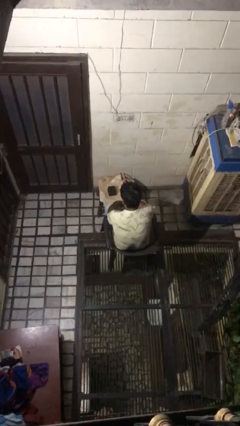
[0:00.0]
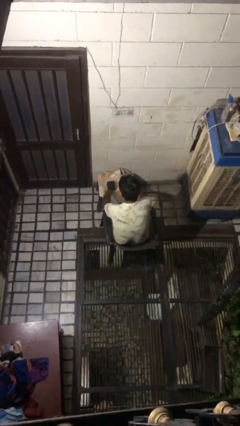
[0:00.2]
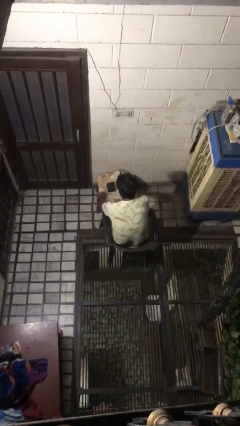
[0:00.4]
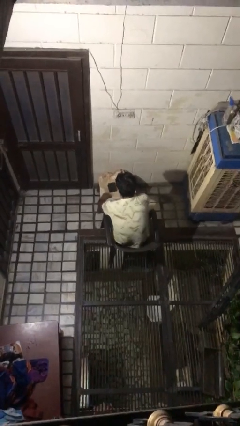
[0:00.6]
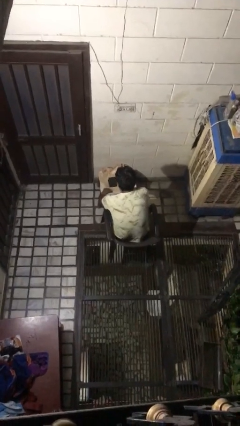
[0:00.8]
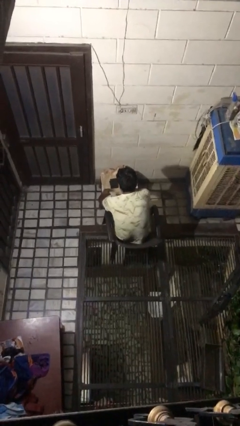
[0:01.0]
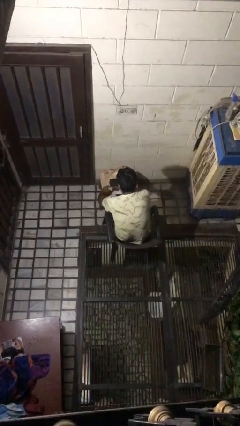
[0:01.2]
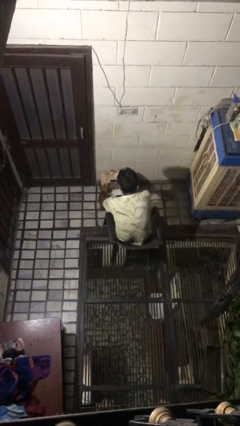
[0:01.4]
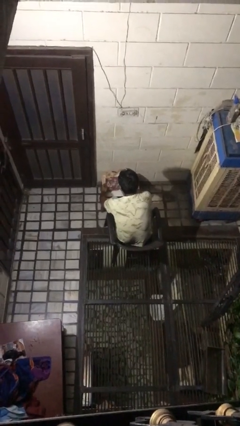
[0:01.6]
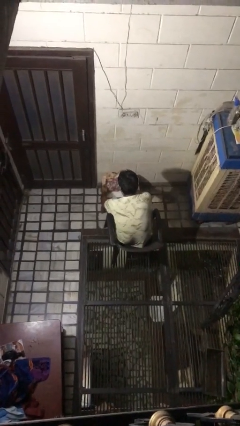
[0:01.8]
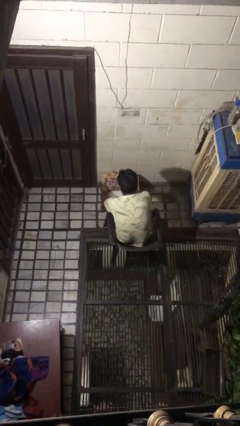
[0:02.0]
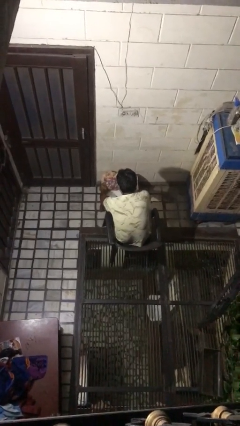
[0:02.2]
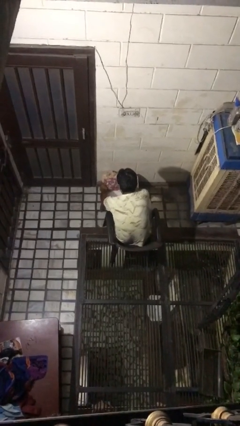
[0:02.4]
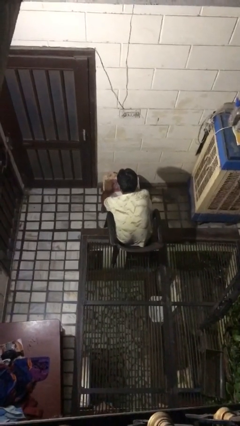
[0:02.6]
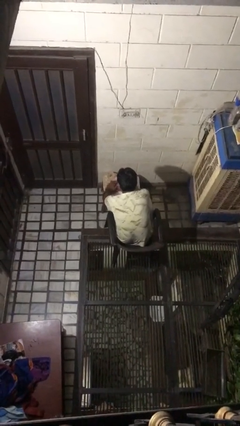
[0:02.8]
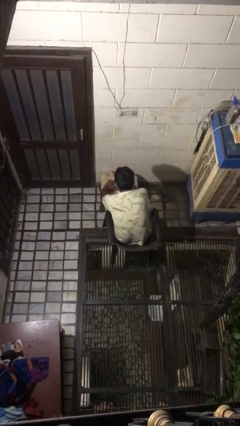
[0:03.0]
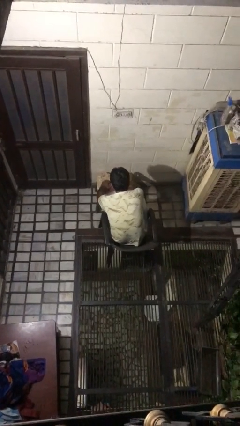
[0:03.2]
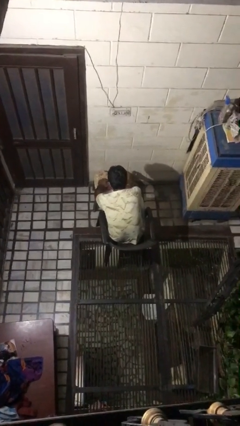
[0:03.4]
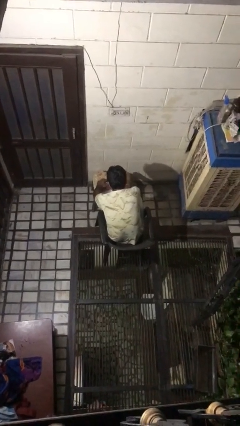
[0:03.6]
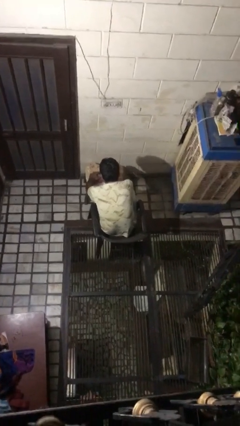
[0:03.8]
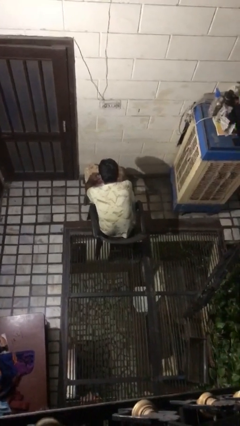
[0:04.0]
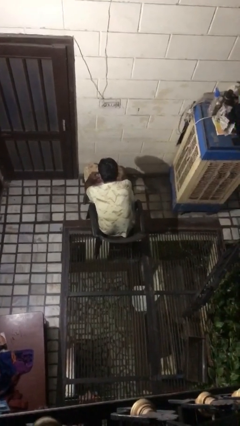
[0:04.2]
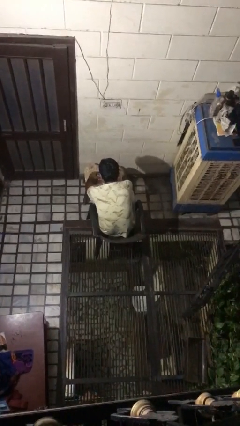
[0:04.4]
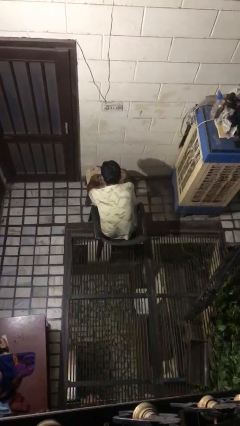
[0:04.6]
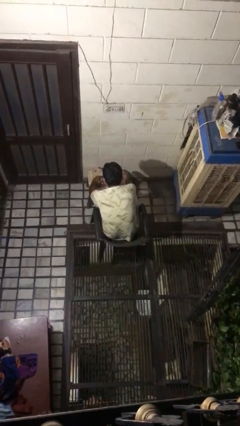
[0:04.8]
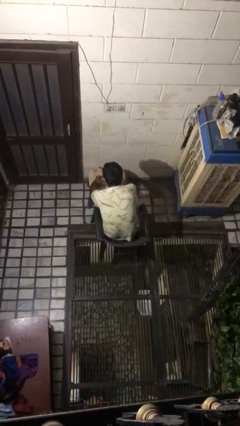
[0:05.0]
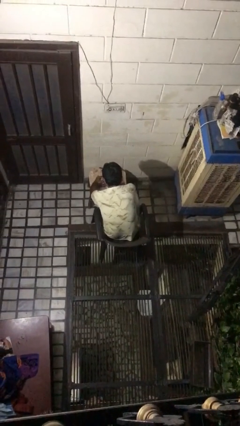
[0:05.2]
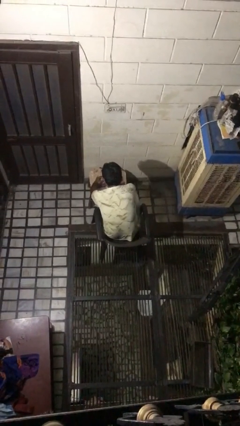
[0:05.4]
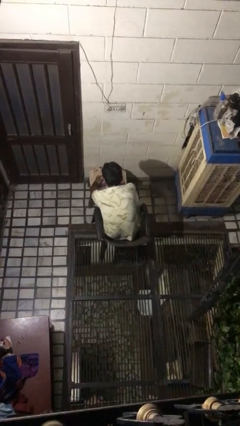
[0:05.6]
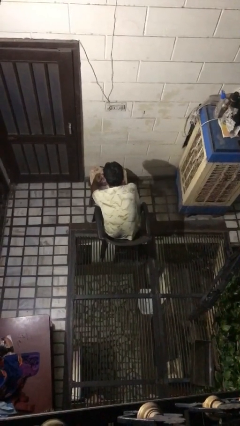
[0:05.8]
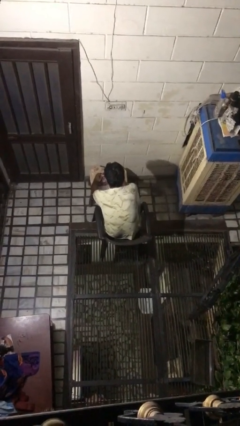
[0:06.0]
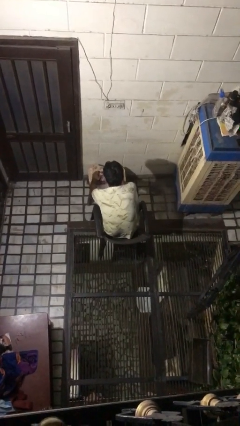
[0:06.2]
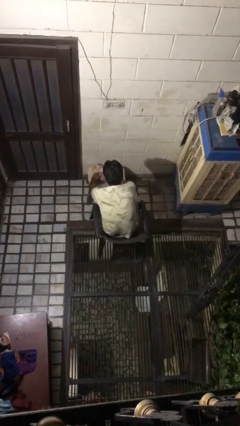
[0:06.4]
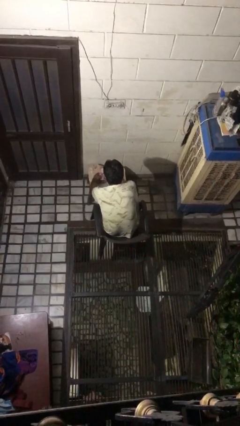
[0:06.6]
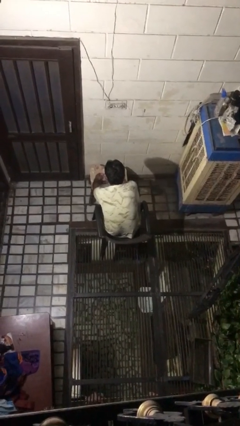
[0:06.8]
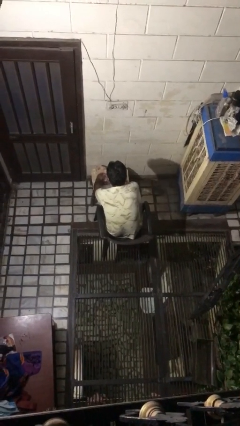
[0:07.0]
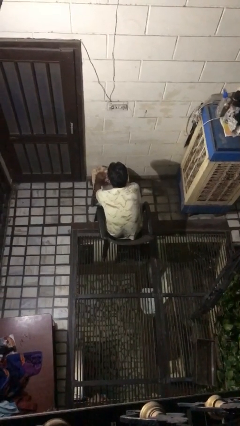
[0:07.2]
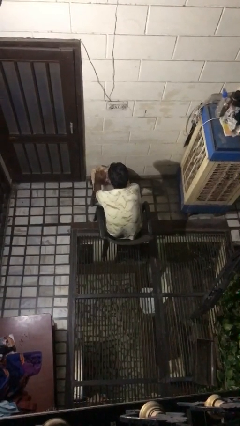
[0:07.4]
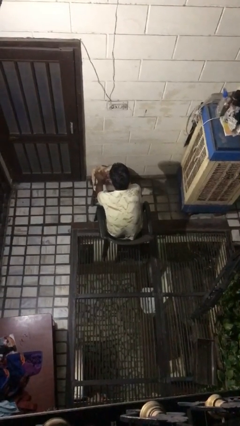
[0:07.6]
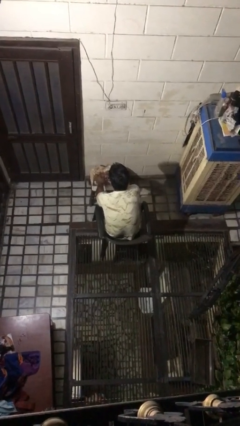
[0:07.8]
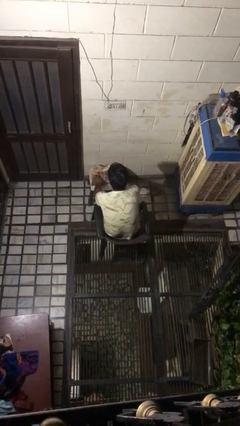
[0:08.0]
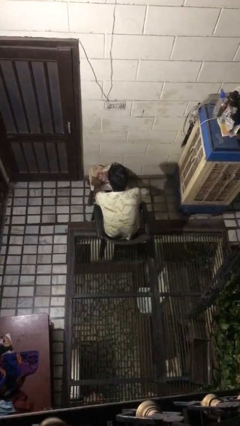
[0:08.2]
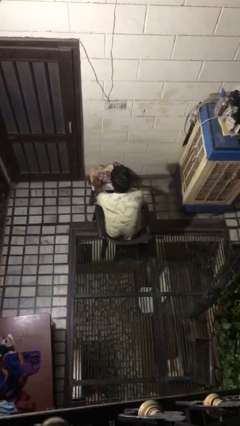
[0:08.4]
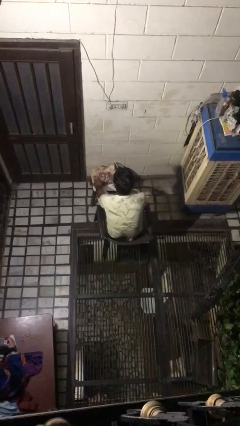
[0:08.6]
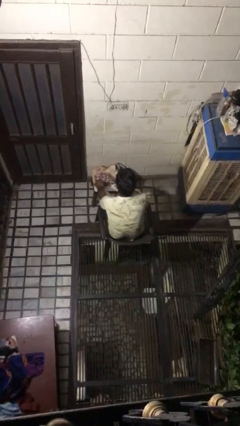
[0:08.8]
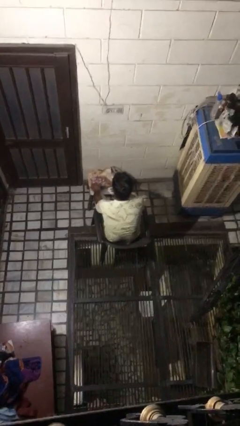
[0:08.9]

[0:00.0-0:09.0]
person wraps box

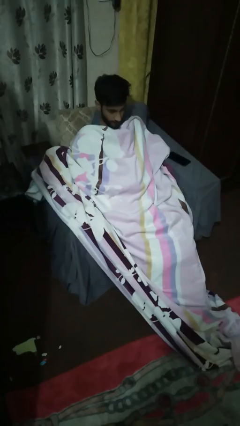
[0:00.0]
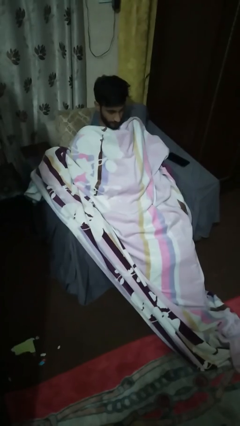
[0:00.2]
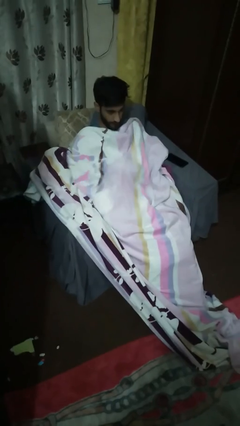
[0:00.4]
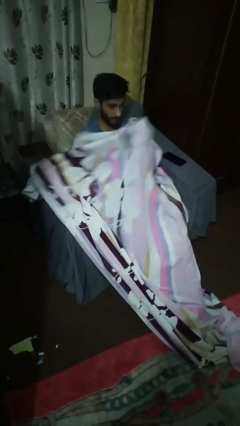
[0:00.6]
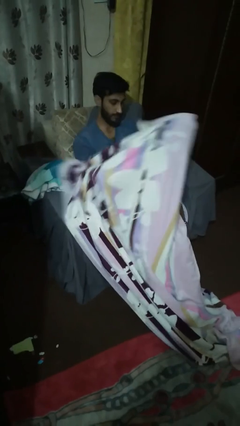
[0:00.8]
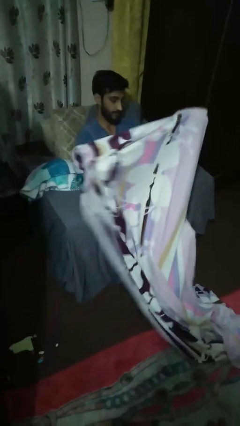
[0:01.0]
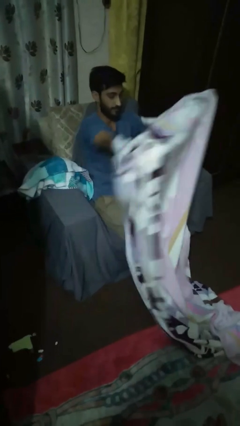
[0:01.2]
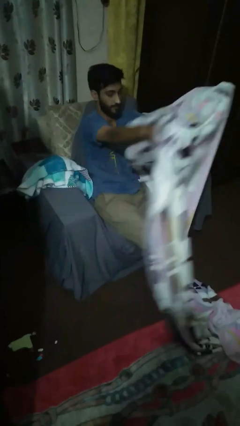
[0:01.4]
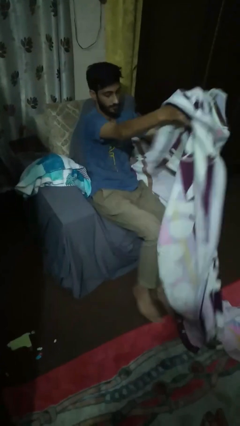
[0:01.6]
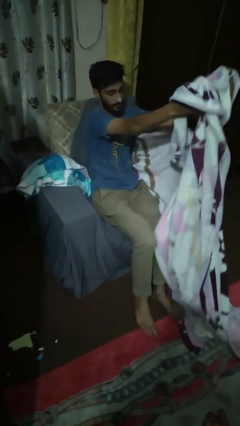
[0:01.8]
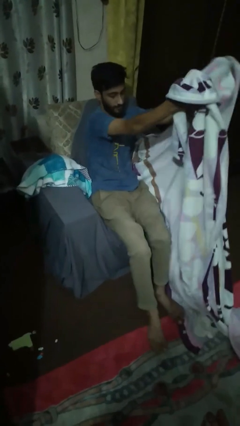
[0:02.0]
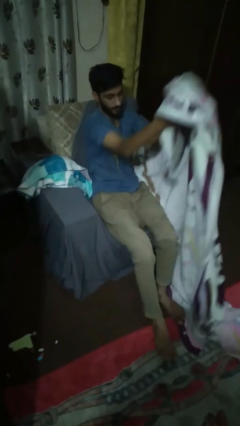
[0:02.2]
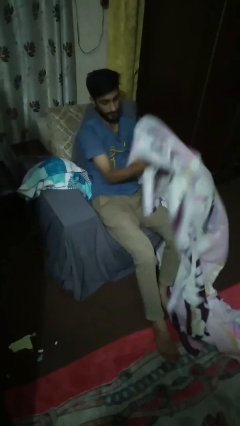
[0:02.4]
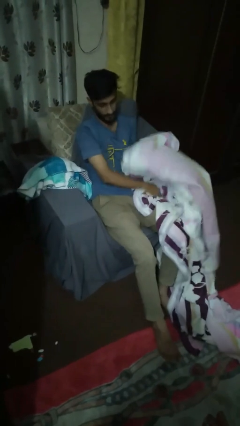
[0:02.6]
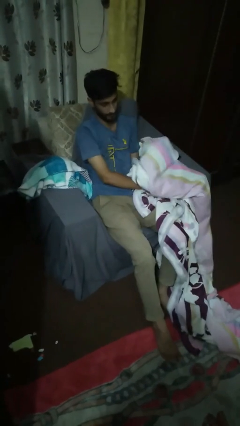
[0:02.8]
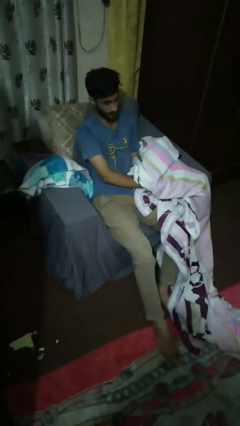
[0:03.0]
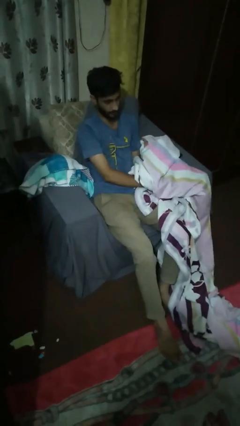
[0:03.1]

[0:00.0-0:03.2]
person uncovers with blanket

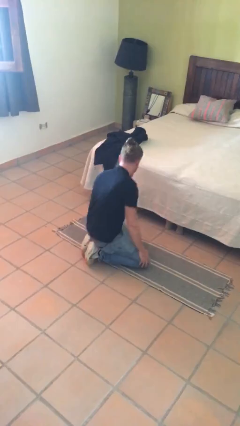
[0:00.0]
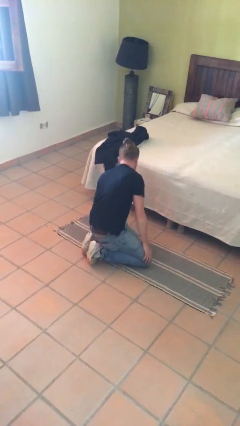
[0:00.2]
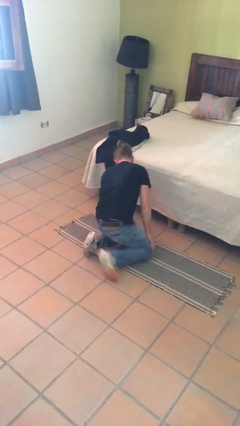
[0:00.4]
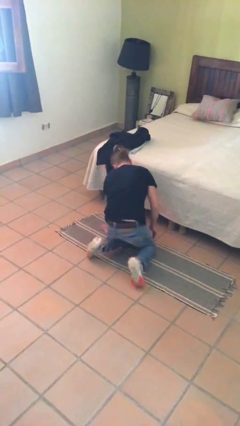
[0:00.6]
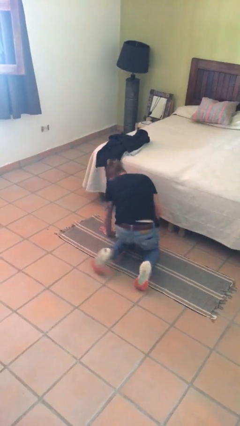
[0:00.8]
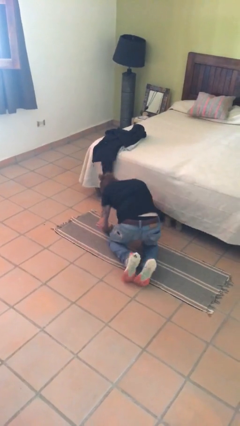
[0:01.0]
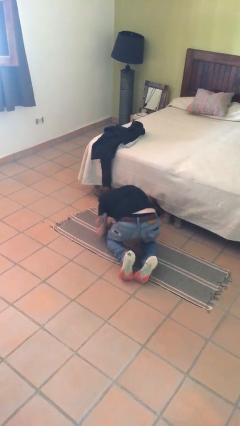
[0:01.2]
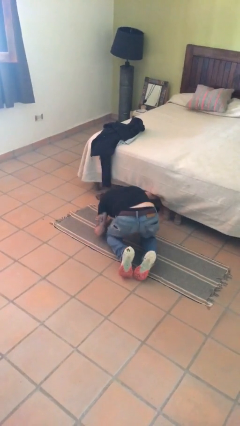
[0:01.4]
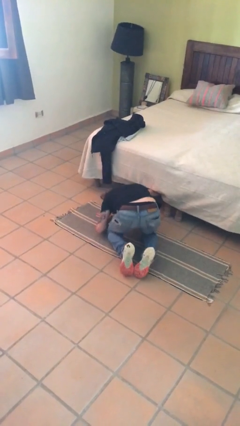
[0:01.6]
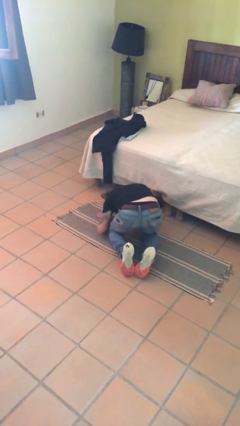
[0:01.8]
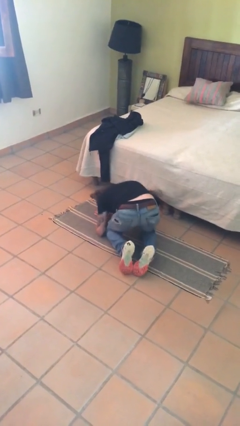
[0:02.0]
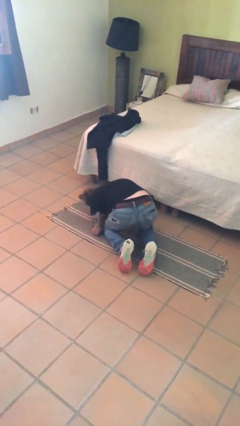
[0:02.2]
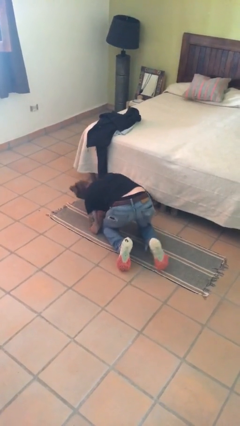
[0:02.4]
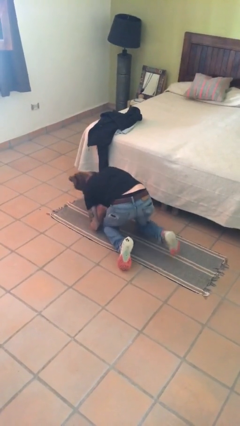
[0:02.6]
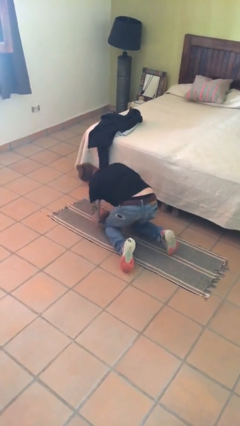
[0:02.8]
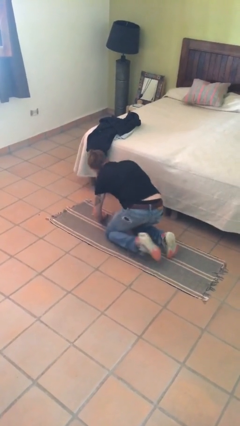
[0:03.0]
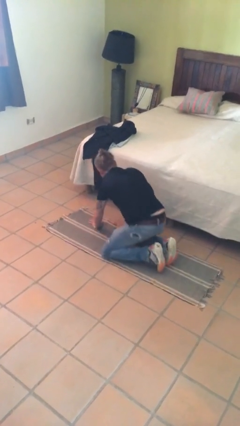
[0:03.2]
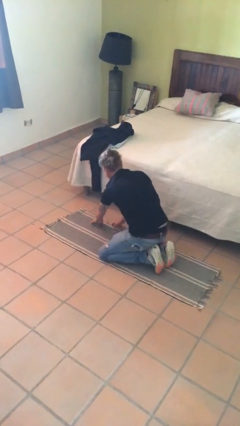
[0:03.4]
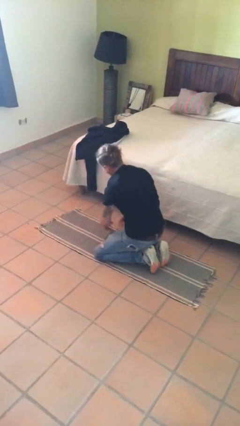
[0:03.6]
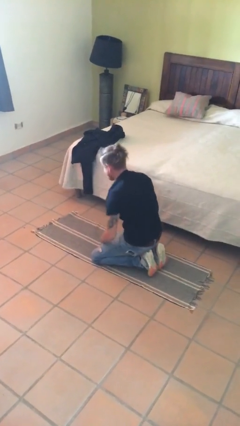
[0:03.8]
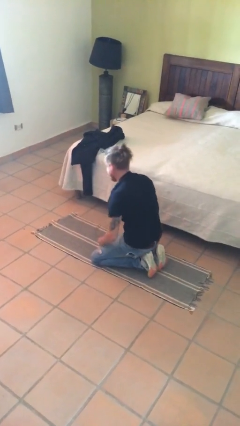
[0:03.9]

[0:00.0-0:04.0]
person searches under bed

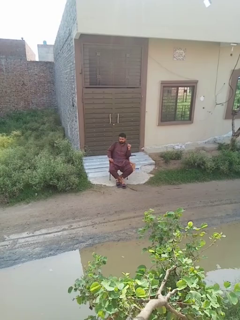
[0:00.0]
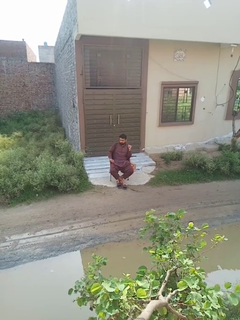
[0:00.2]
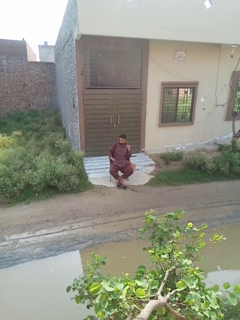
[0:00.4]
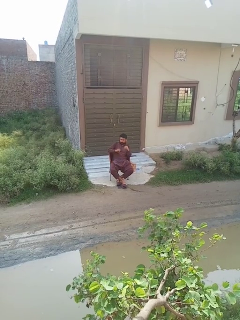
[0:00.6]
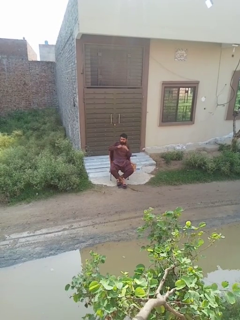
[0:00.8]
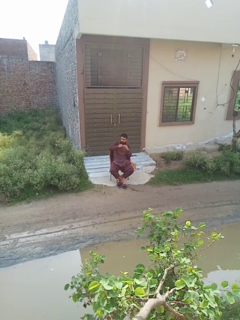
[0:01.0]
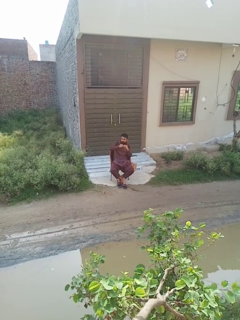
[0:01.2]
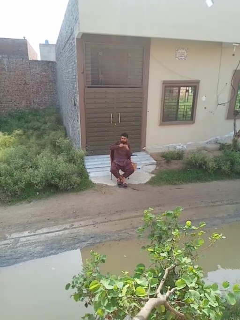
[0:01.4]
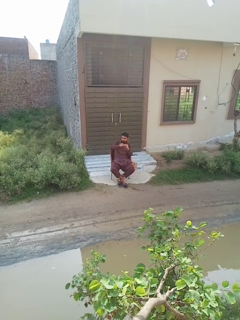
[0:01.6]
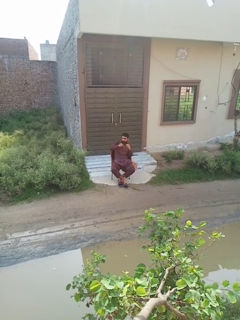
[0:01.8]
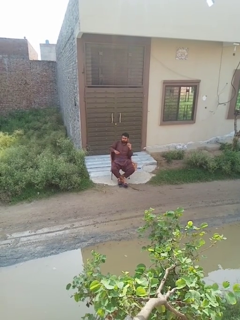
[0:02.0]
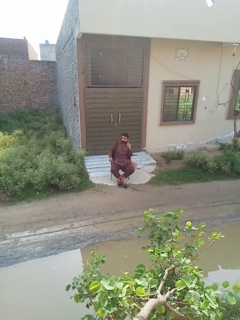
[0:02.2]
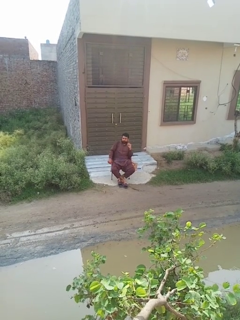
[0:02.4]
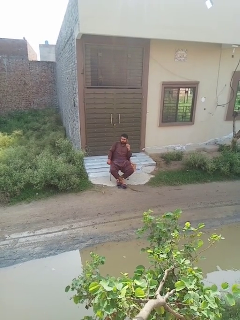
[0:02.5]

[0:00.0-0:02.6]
person takes off ring
